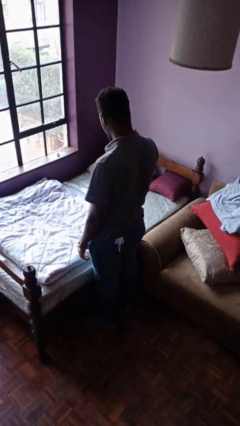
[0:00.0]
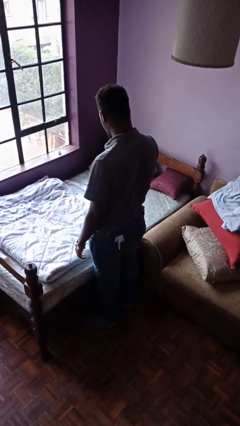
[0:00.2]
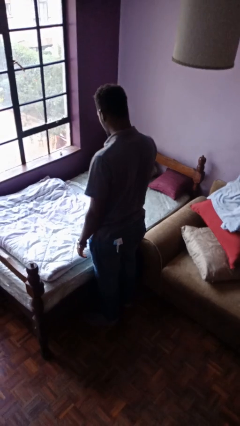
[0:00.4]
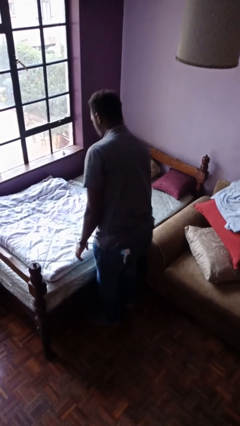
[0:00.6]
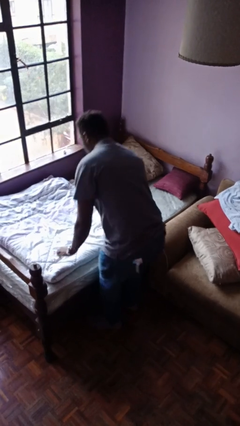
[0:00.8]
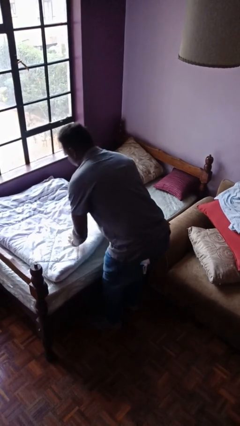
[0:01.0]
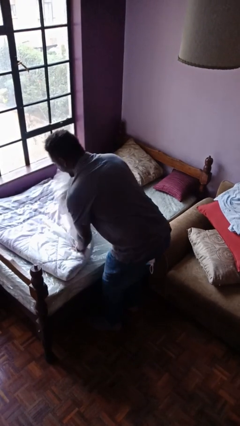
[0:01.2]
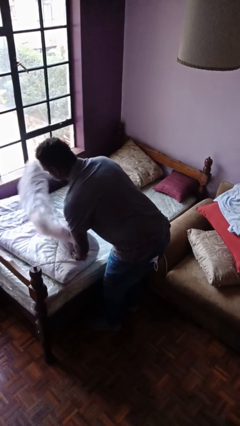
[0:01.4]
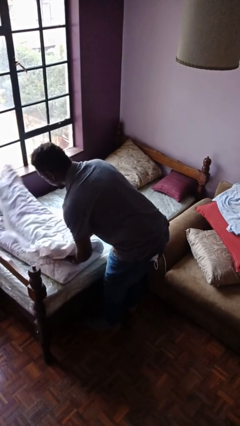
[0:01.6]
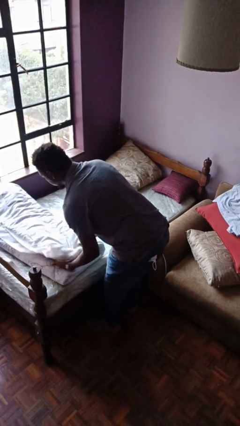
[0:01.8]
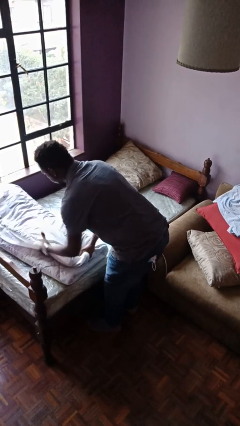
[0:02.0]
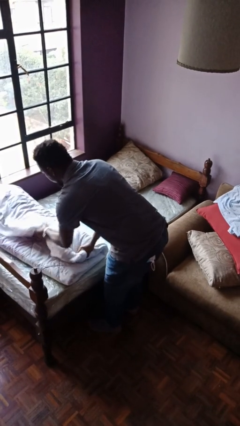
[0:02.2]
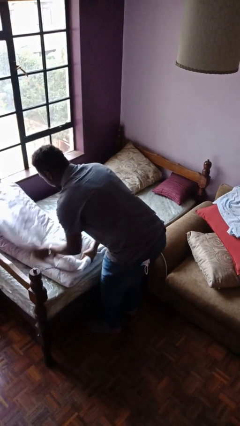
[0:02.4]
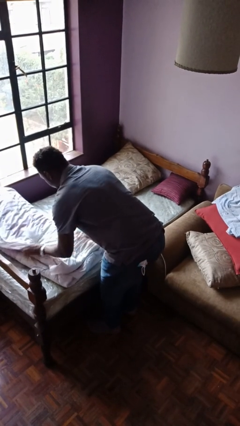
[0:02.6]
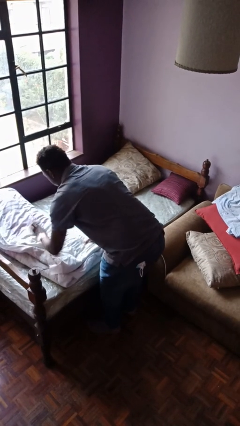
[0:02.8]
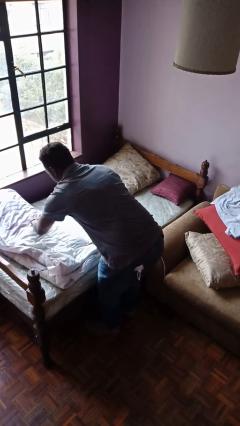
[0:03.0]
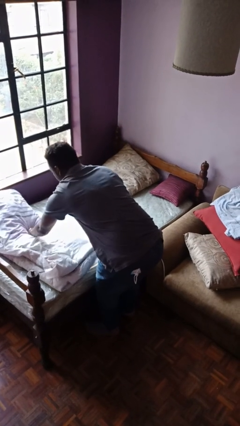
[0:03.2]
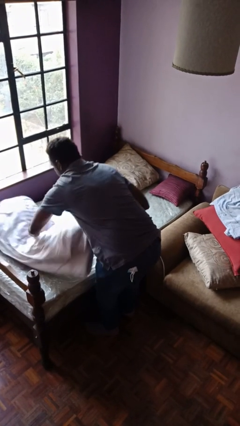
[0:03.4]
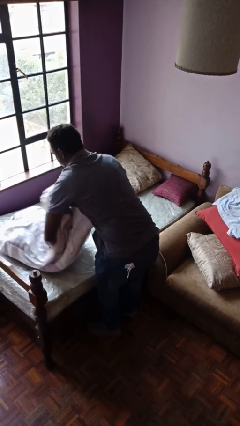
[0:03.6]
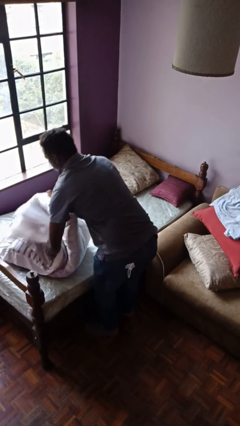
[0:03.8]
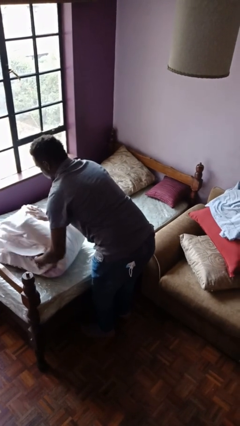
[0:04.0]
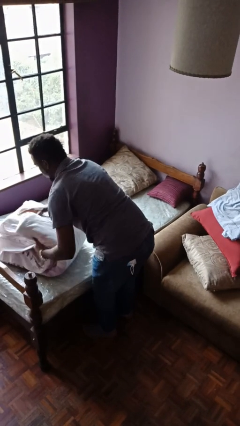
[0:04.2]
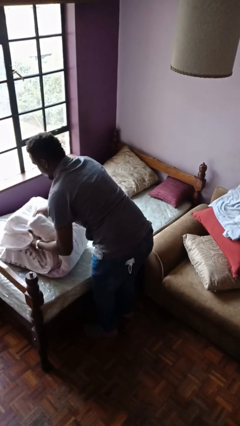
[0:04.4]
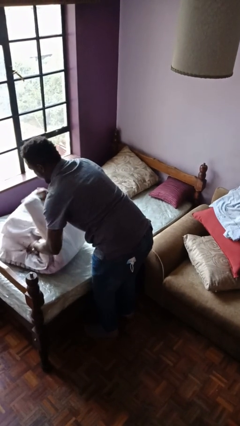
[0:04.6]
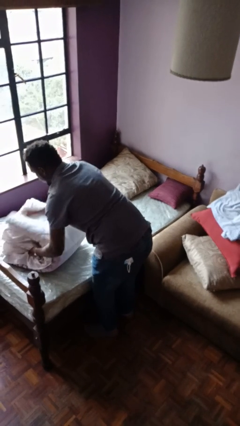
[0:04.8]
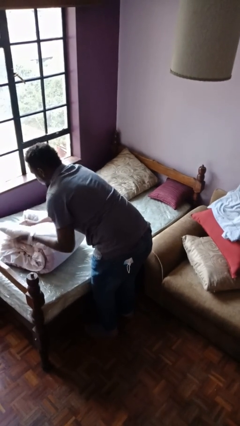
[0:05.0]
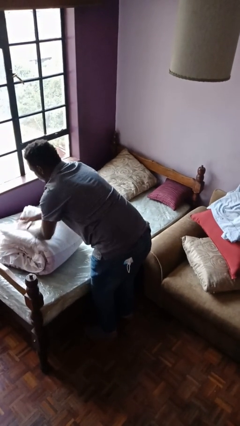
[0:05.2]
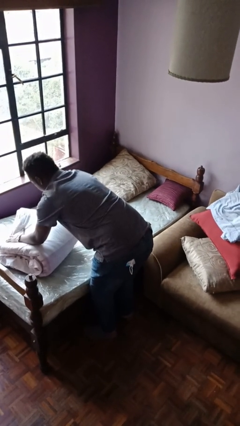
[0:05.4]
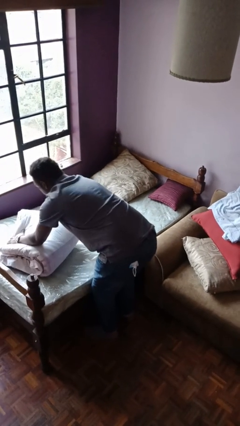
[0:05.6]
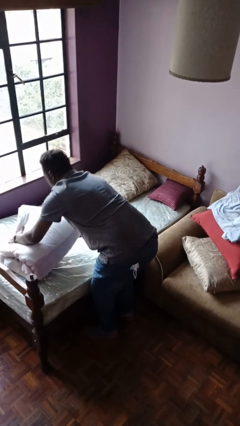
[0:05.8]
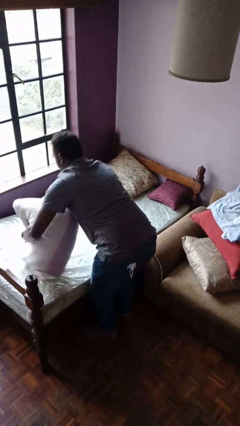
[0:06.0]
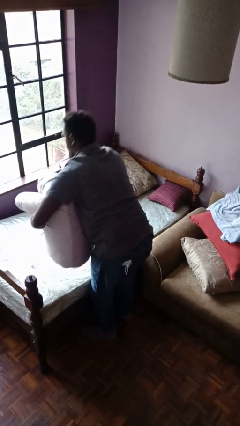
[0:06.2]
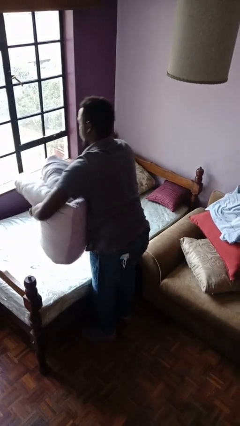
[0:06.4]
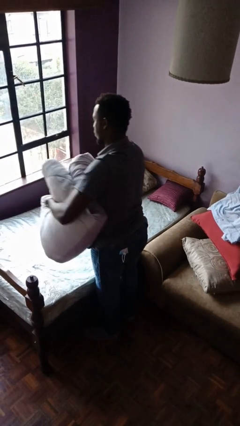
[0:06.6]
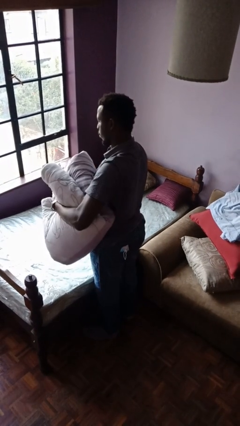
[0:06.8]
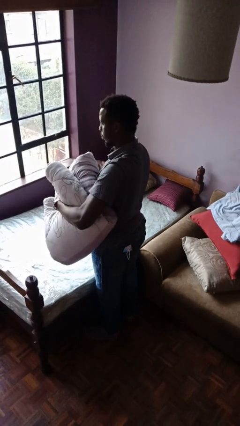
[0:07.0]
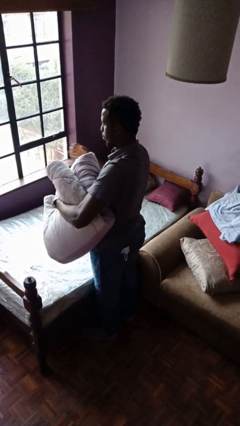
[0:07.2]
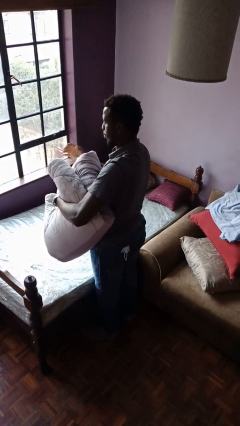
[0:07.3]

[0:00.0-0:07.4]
person folds blanket

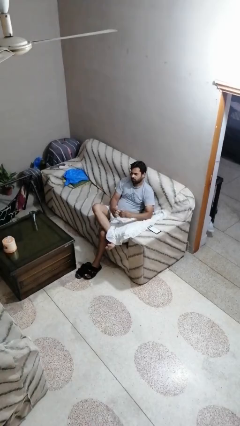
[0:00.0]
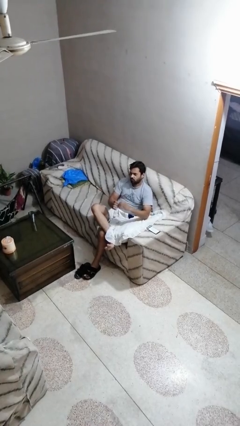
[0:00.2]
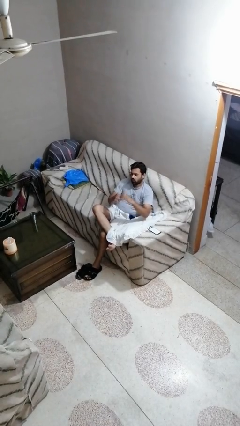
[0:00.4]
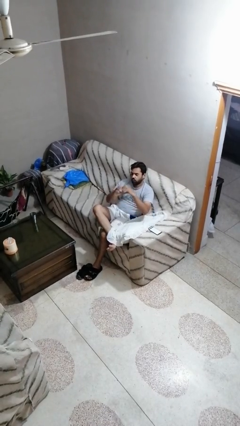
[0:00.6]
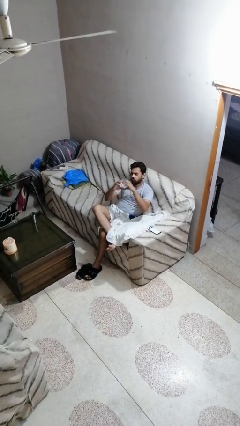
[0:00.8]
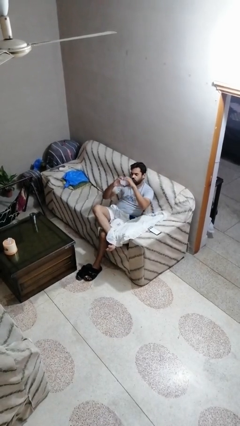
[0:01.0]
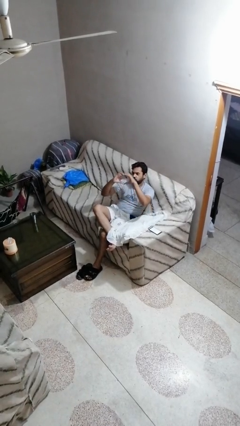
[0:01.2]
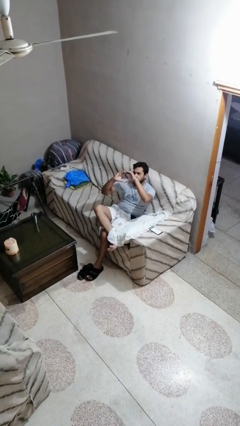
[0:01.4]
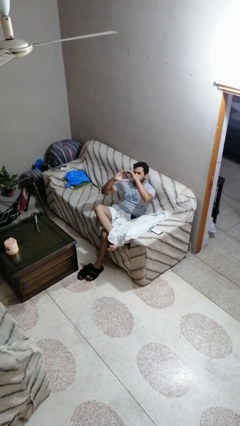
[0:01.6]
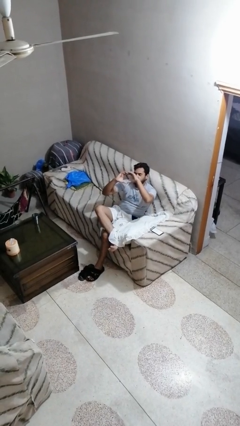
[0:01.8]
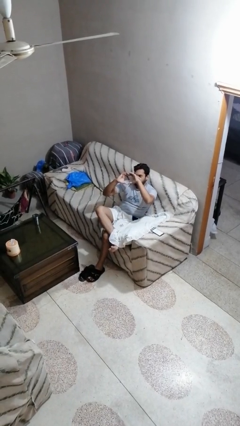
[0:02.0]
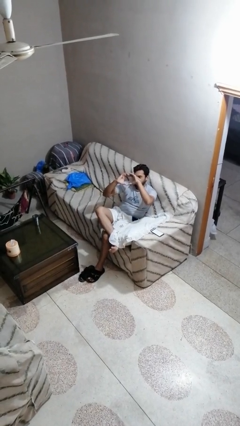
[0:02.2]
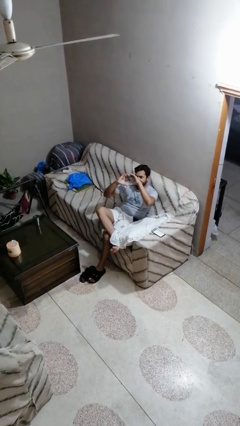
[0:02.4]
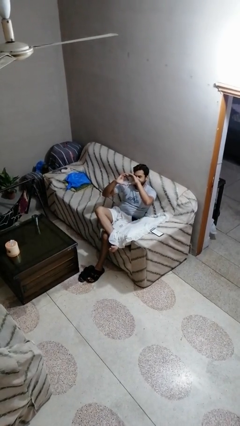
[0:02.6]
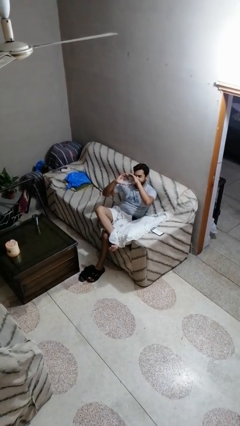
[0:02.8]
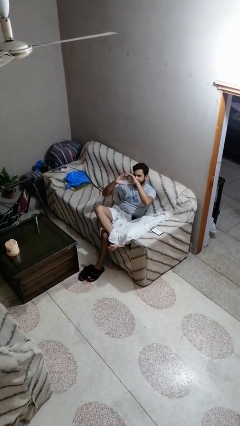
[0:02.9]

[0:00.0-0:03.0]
person gestures heart

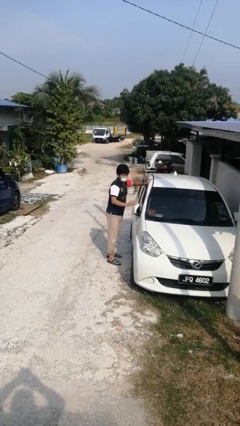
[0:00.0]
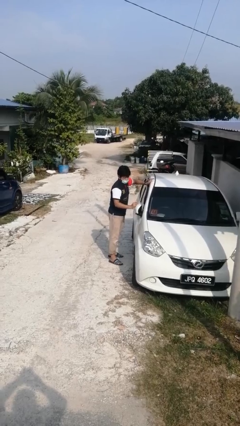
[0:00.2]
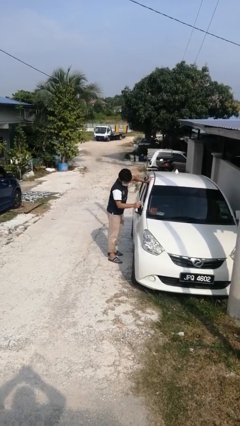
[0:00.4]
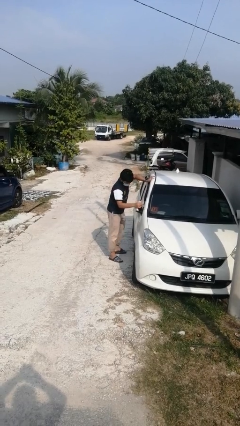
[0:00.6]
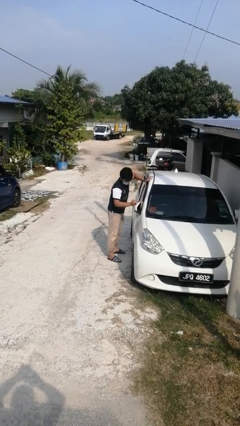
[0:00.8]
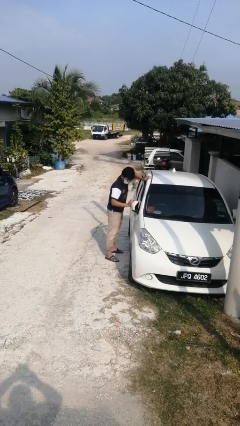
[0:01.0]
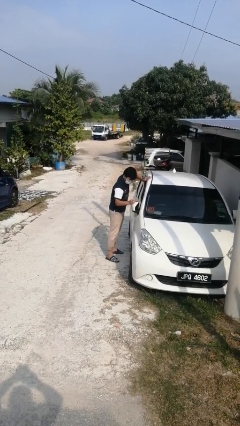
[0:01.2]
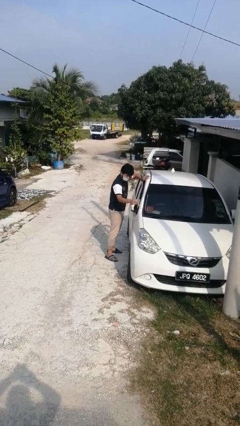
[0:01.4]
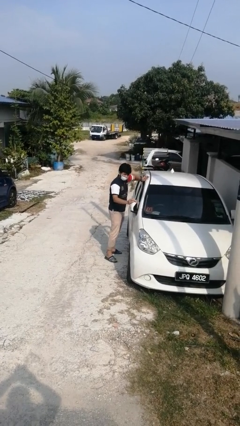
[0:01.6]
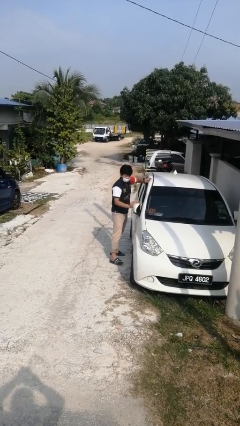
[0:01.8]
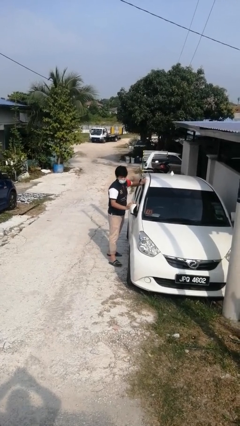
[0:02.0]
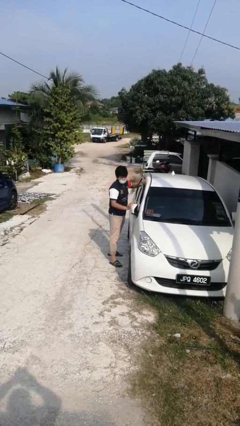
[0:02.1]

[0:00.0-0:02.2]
person polishes car with rag

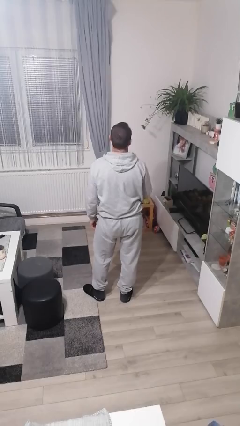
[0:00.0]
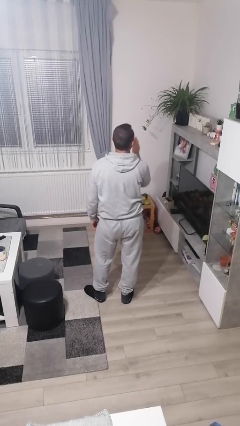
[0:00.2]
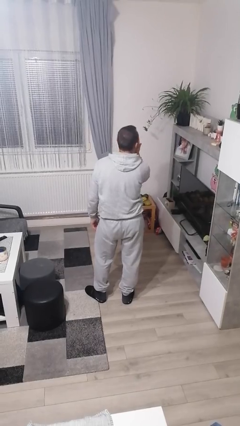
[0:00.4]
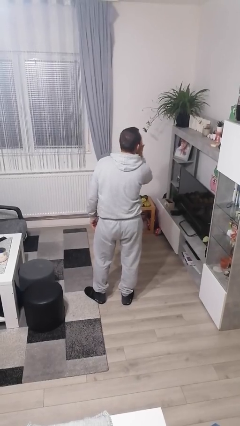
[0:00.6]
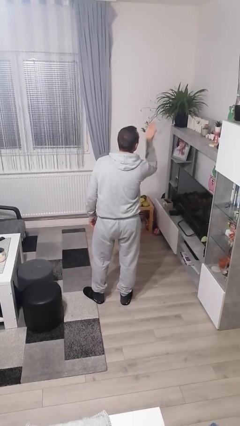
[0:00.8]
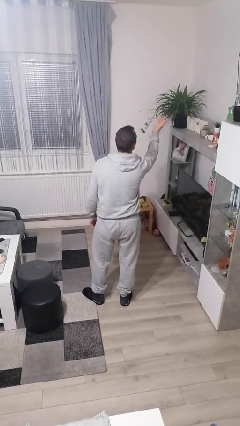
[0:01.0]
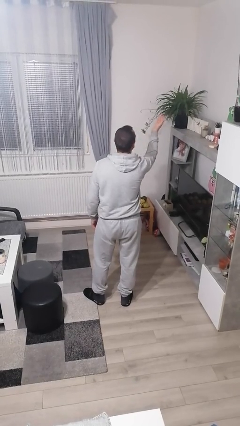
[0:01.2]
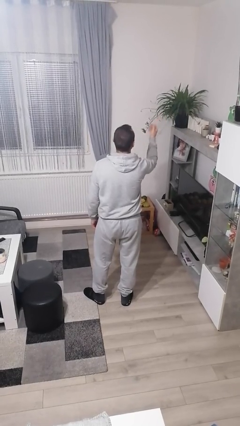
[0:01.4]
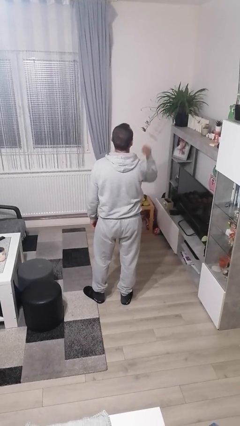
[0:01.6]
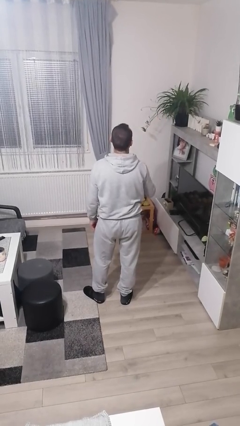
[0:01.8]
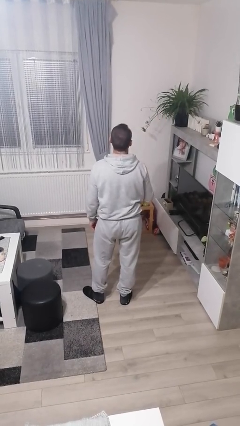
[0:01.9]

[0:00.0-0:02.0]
person gestures blow kiss

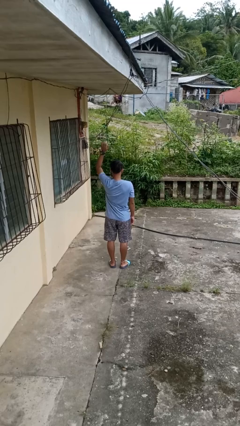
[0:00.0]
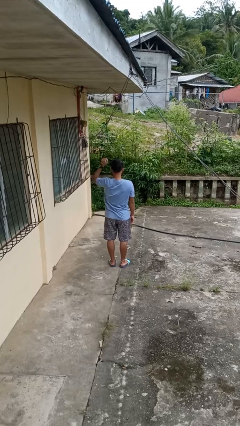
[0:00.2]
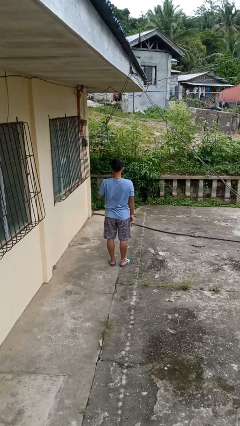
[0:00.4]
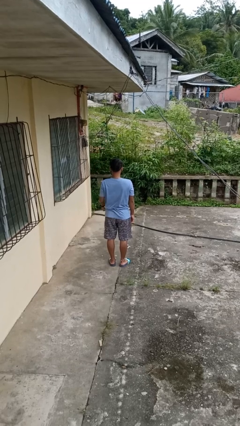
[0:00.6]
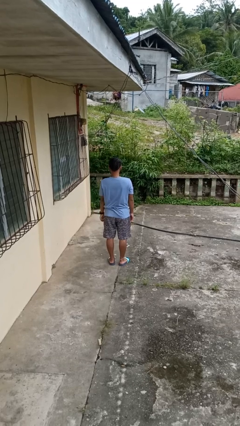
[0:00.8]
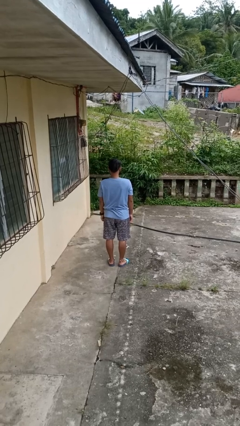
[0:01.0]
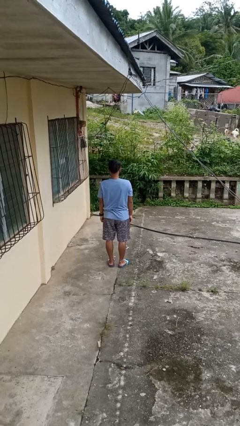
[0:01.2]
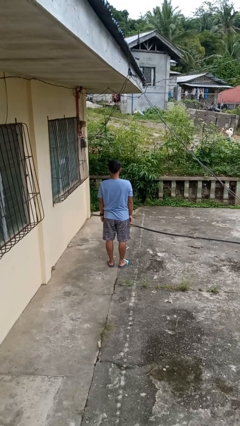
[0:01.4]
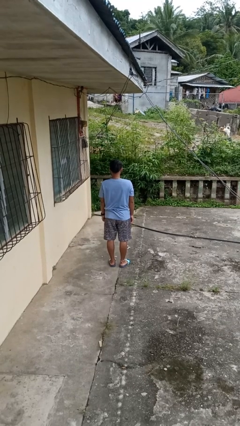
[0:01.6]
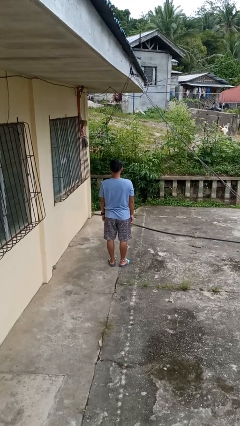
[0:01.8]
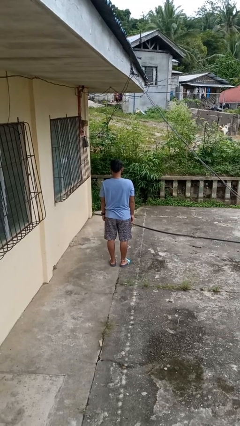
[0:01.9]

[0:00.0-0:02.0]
person gestures lower hand

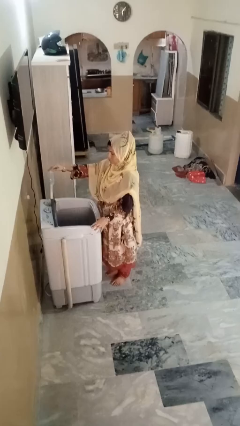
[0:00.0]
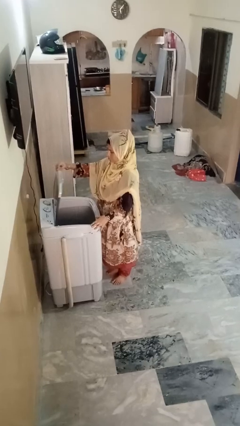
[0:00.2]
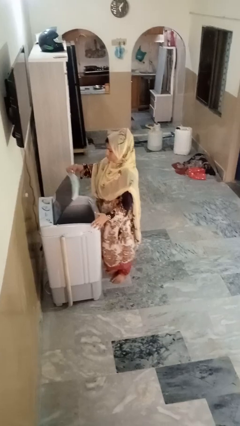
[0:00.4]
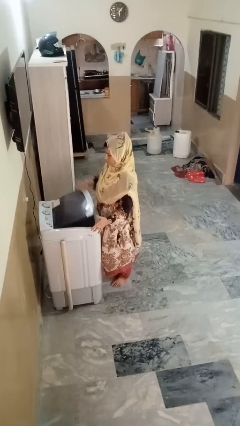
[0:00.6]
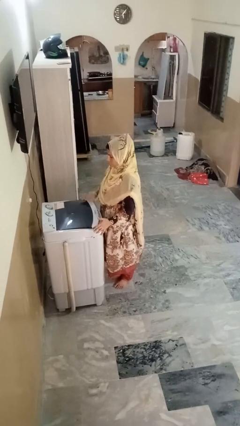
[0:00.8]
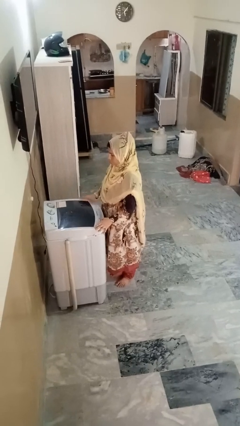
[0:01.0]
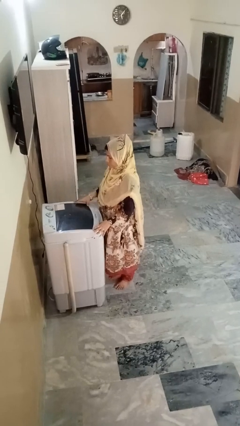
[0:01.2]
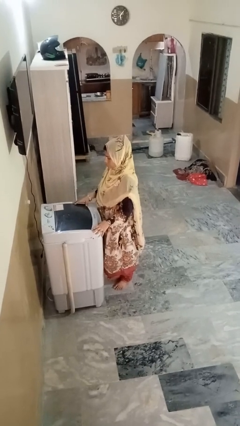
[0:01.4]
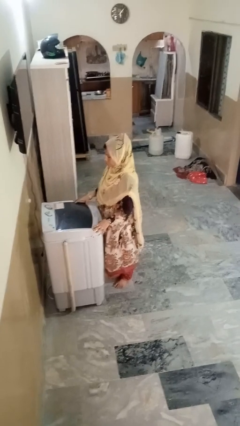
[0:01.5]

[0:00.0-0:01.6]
person closes clothes washer
